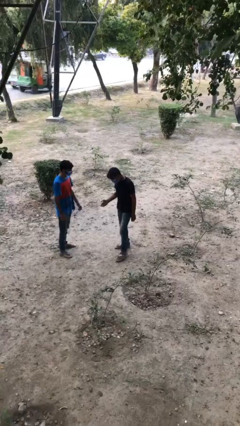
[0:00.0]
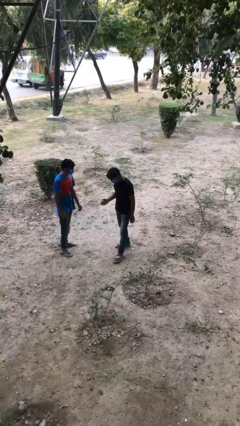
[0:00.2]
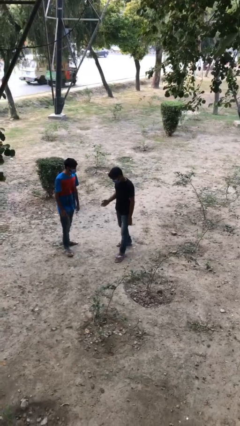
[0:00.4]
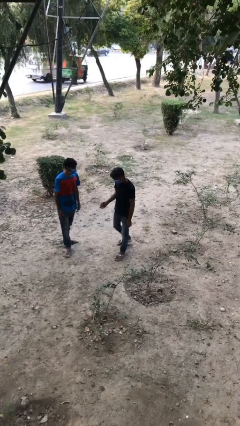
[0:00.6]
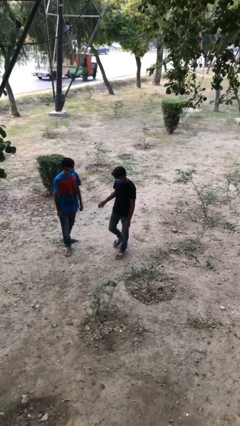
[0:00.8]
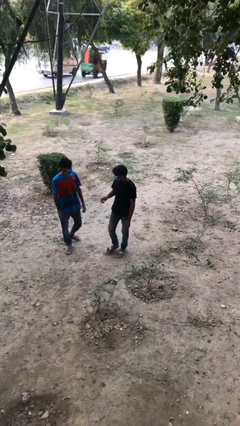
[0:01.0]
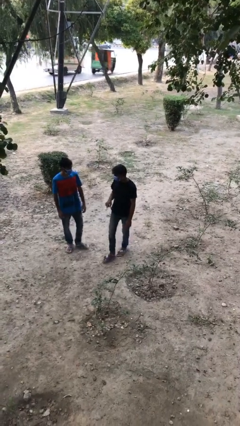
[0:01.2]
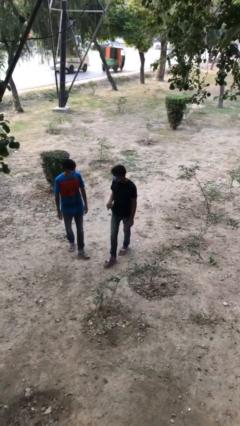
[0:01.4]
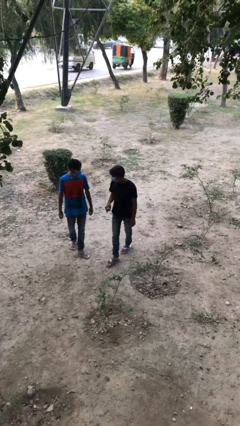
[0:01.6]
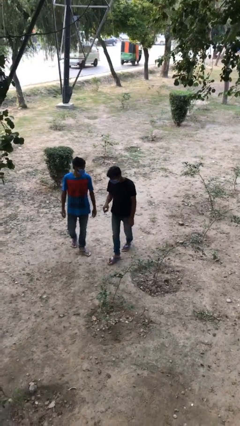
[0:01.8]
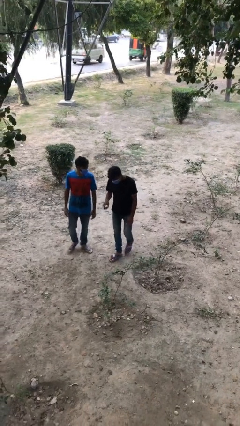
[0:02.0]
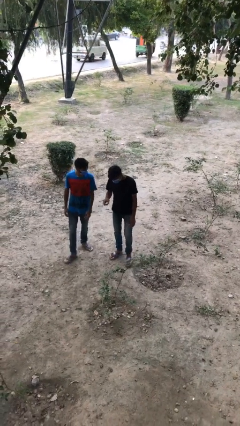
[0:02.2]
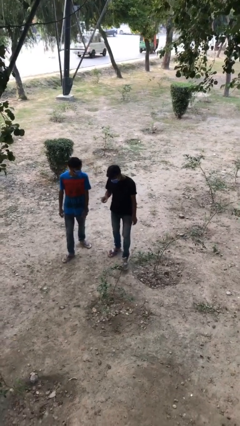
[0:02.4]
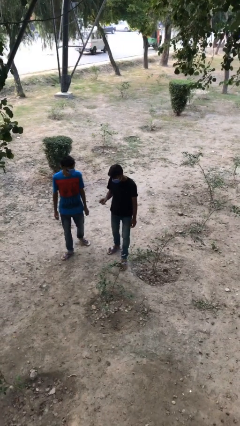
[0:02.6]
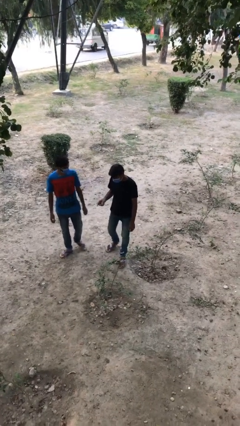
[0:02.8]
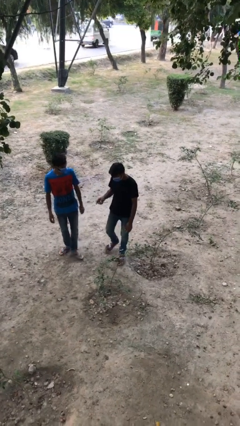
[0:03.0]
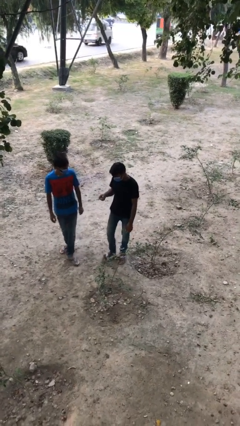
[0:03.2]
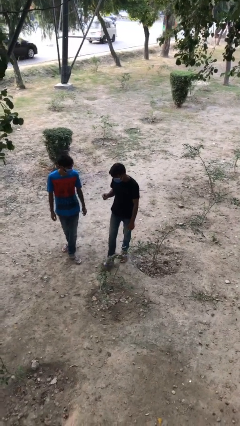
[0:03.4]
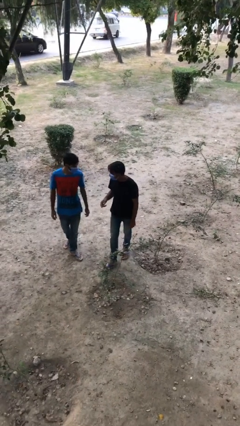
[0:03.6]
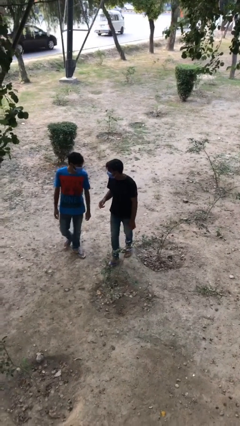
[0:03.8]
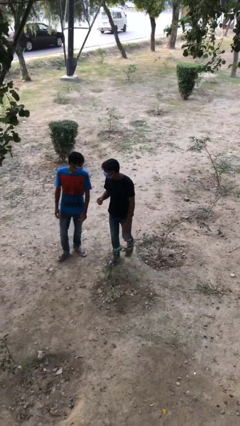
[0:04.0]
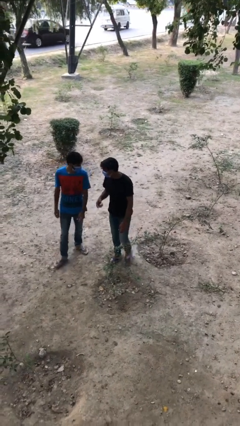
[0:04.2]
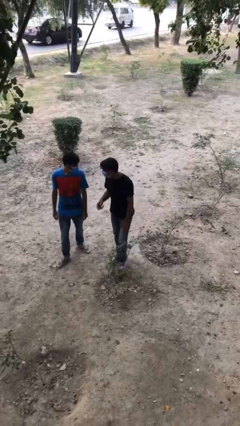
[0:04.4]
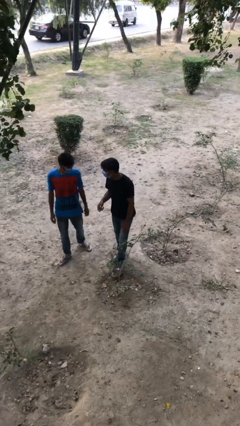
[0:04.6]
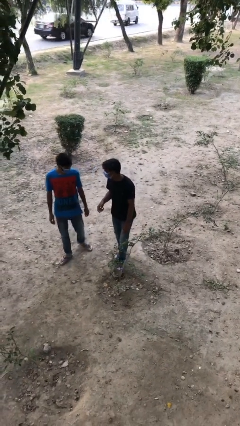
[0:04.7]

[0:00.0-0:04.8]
person talks to person

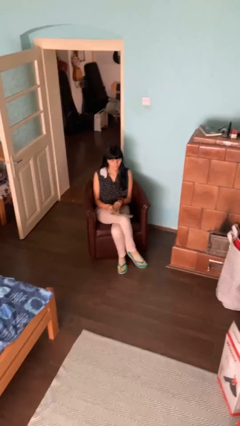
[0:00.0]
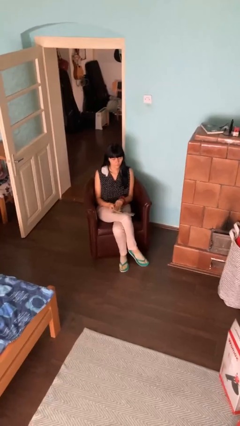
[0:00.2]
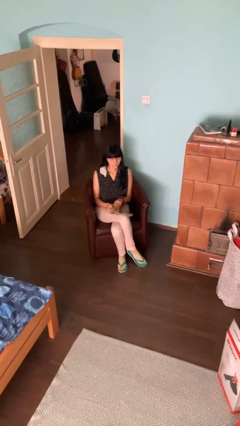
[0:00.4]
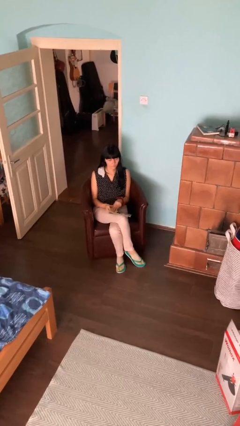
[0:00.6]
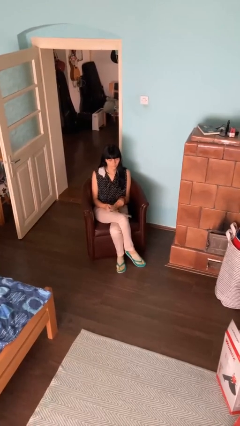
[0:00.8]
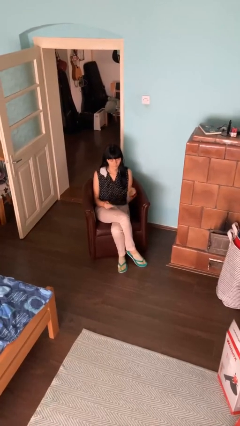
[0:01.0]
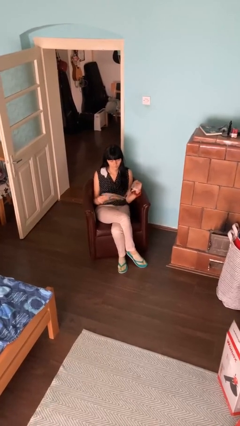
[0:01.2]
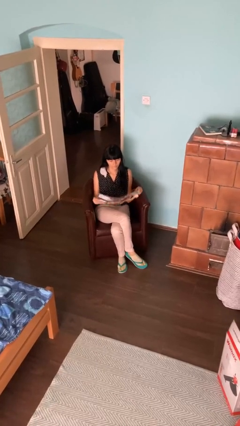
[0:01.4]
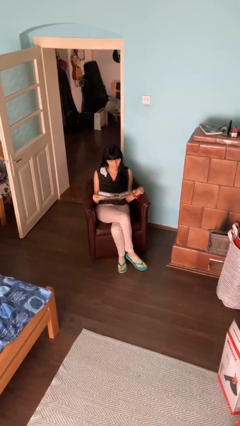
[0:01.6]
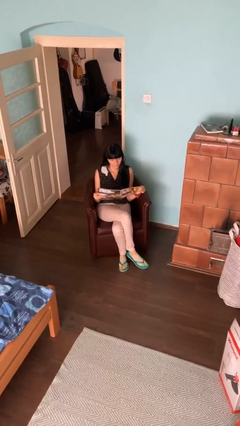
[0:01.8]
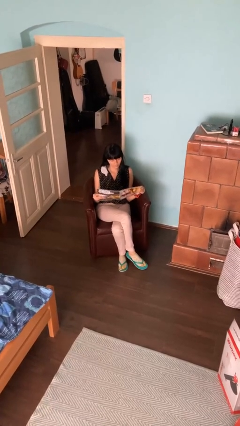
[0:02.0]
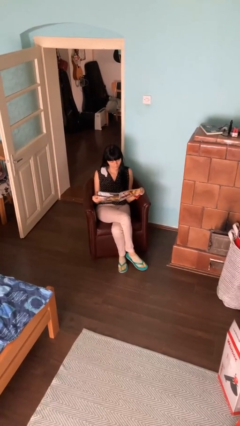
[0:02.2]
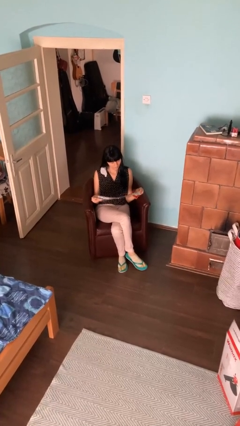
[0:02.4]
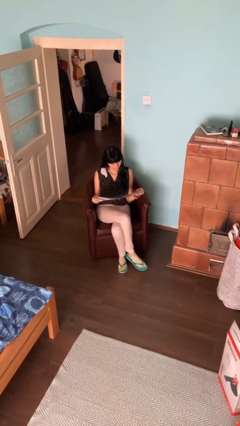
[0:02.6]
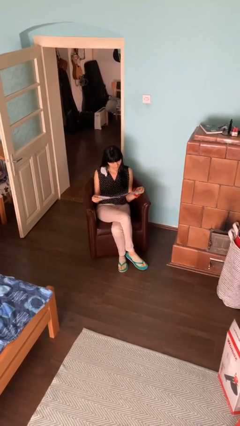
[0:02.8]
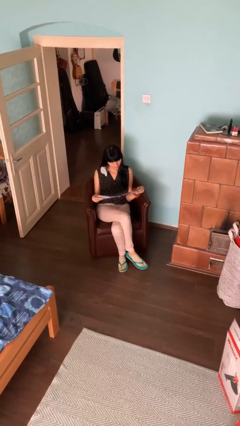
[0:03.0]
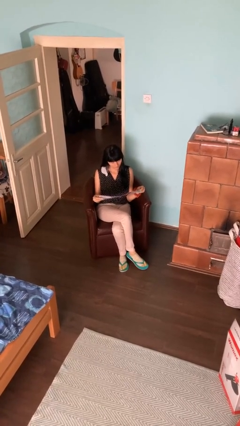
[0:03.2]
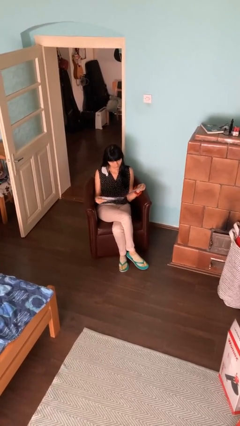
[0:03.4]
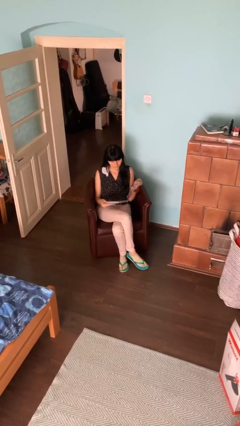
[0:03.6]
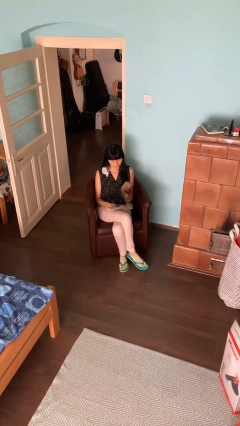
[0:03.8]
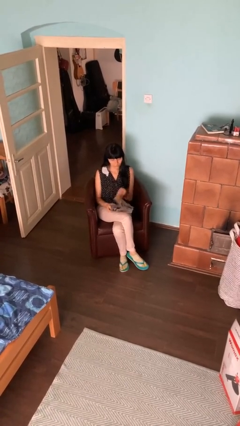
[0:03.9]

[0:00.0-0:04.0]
person reads magazine

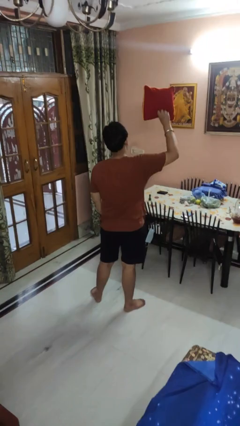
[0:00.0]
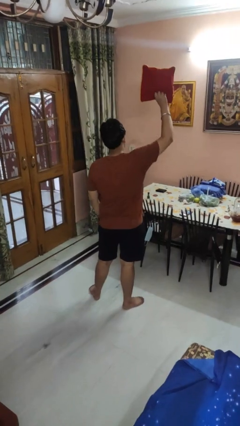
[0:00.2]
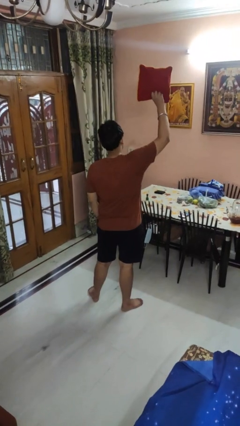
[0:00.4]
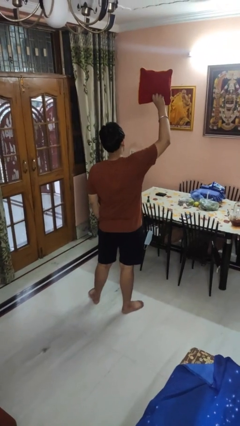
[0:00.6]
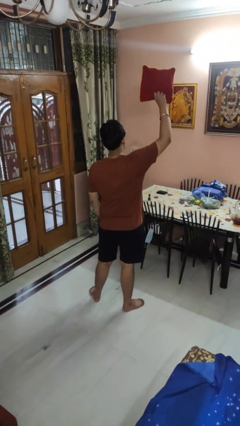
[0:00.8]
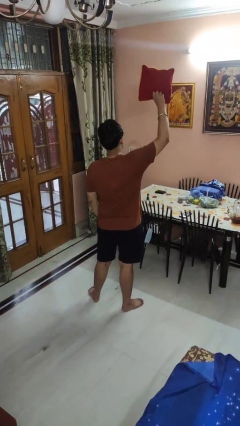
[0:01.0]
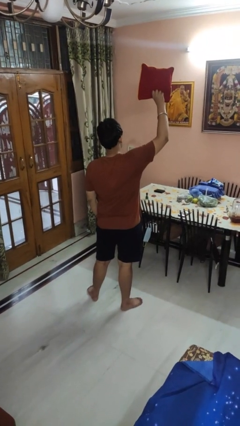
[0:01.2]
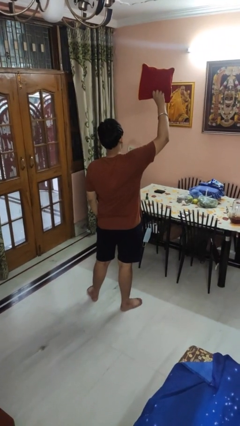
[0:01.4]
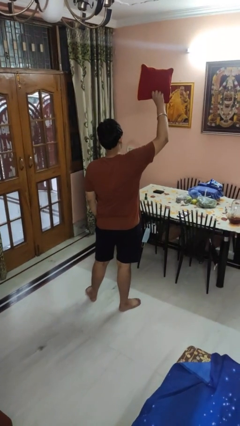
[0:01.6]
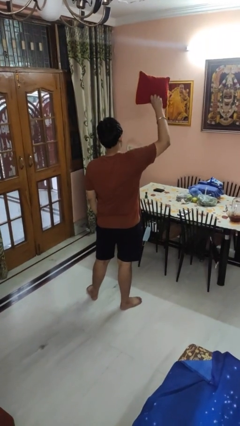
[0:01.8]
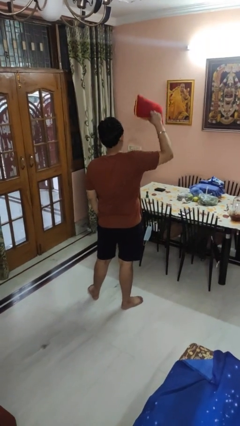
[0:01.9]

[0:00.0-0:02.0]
person holds object above head

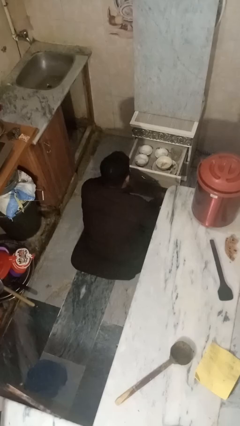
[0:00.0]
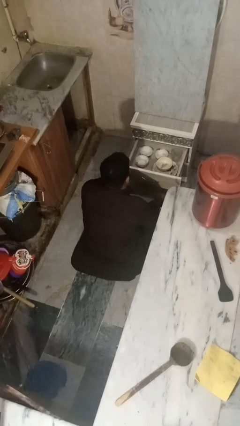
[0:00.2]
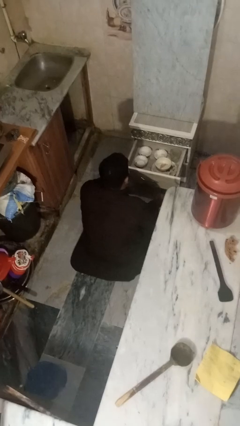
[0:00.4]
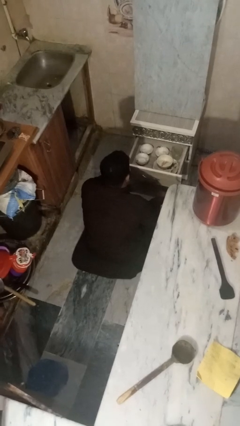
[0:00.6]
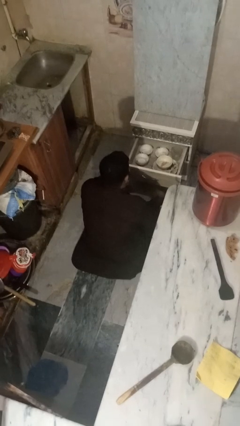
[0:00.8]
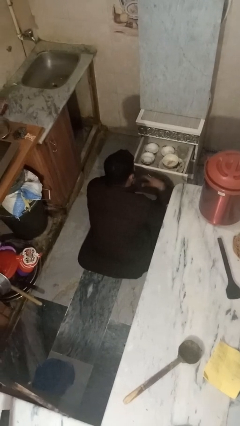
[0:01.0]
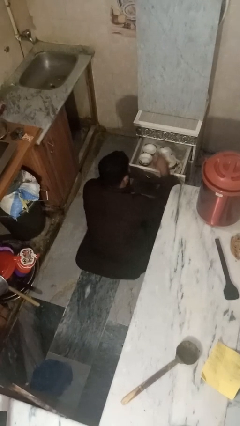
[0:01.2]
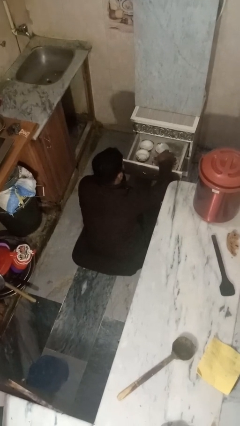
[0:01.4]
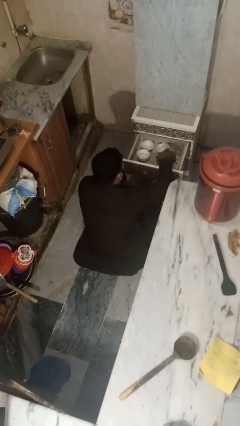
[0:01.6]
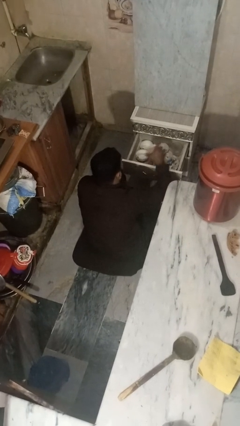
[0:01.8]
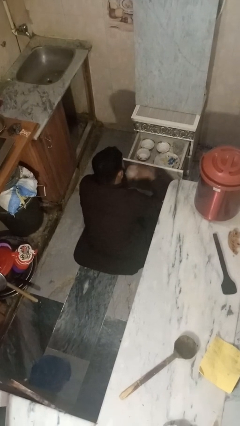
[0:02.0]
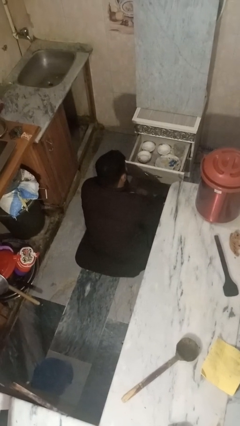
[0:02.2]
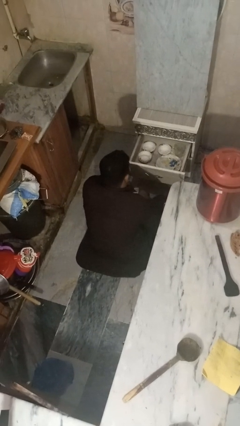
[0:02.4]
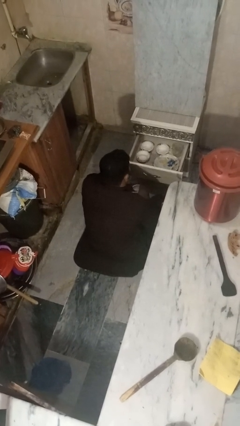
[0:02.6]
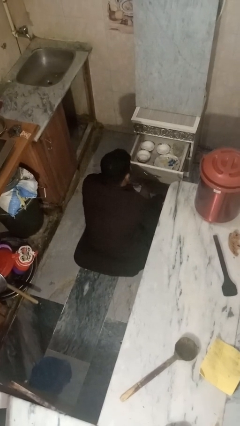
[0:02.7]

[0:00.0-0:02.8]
person takes object from kitchen drawer

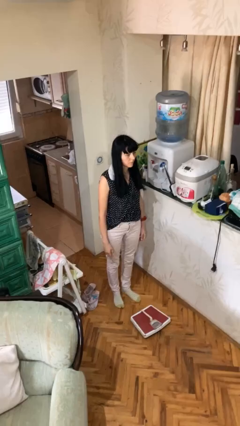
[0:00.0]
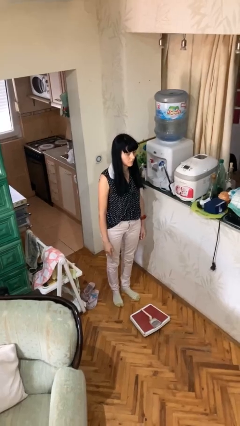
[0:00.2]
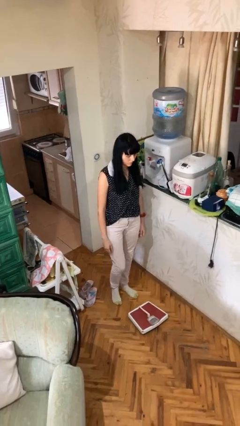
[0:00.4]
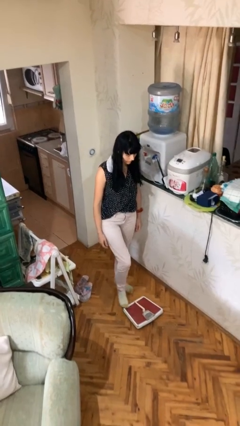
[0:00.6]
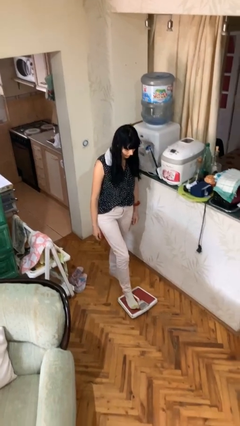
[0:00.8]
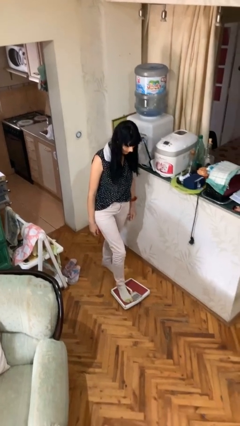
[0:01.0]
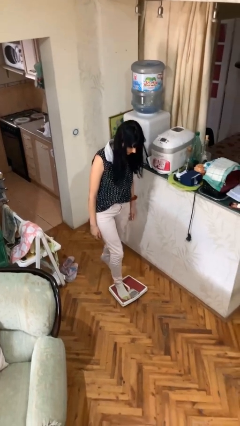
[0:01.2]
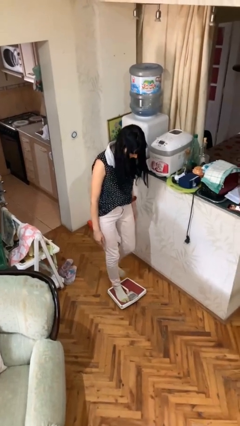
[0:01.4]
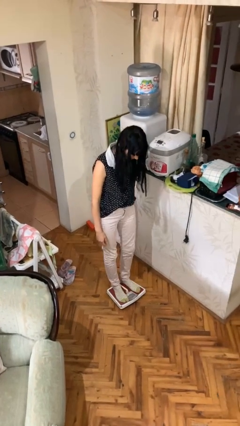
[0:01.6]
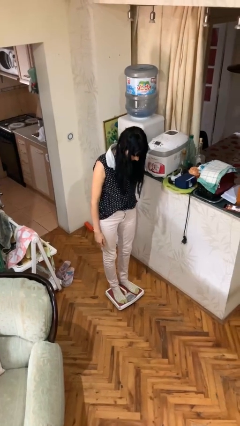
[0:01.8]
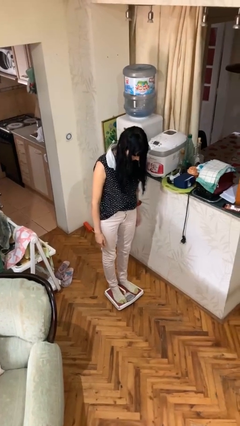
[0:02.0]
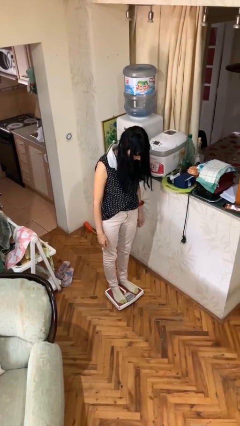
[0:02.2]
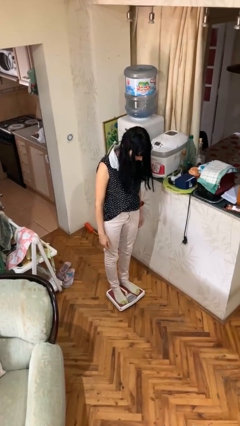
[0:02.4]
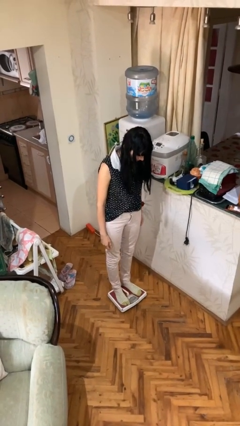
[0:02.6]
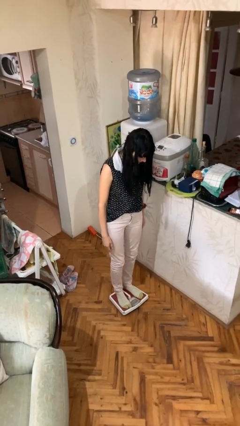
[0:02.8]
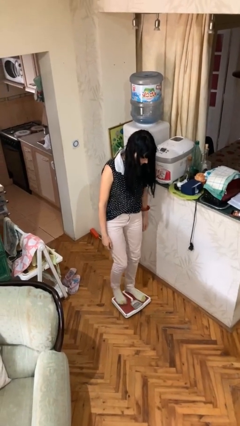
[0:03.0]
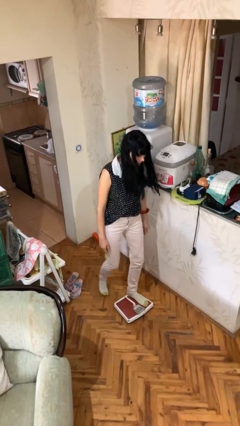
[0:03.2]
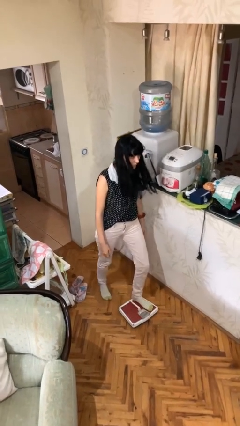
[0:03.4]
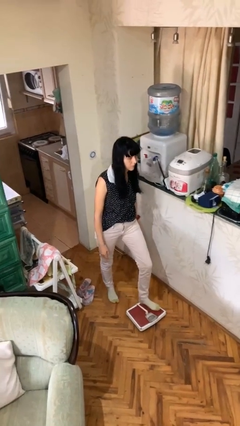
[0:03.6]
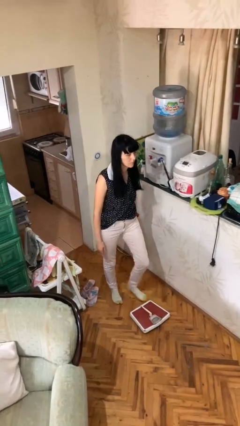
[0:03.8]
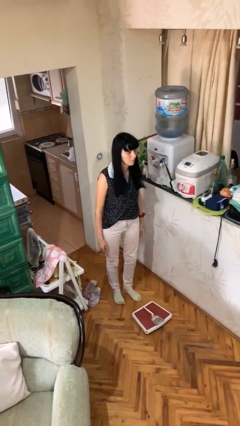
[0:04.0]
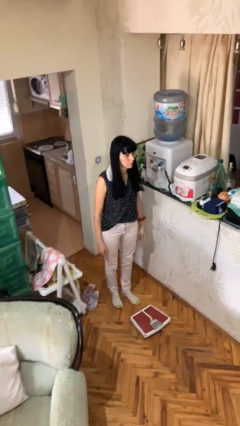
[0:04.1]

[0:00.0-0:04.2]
person uses bodyweight scale
